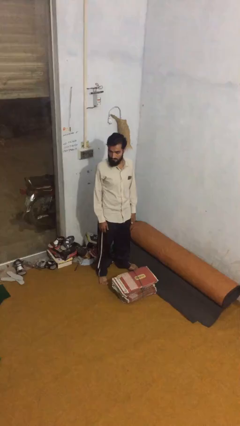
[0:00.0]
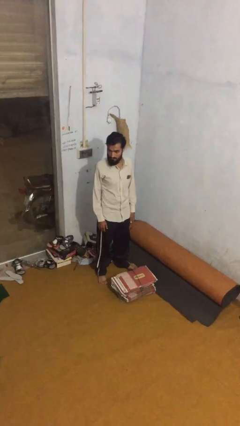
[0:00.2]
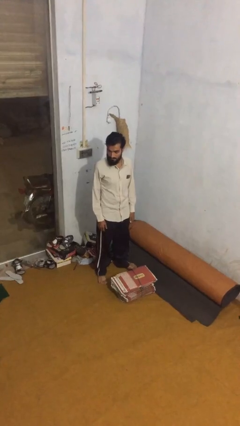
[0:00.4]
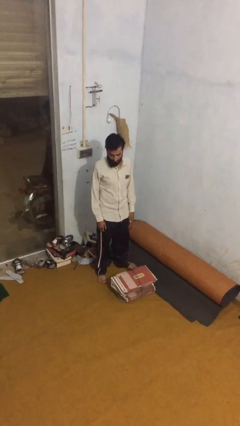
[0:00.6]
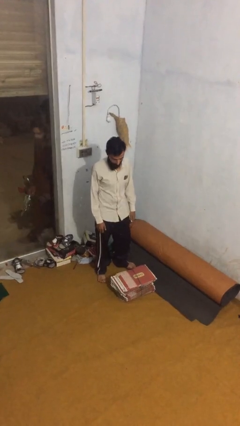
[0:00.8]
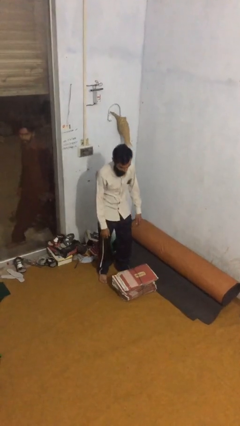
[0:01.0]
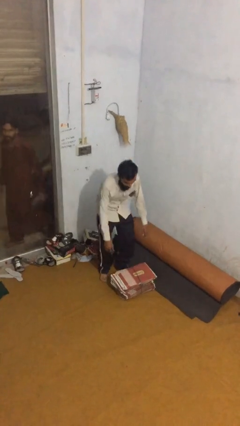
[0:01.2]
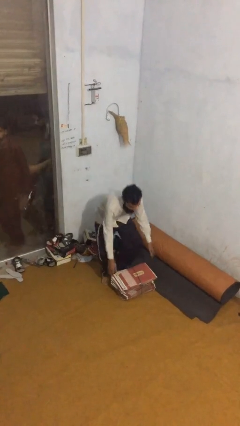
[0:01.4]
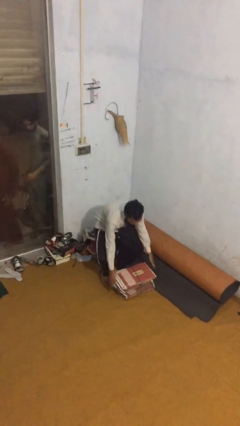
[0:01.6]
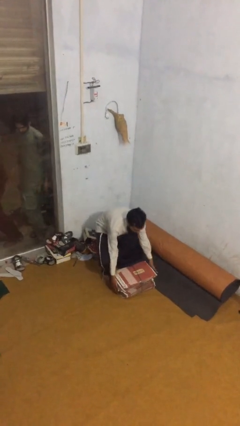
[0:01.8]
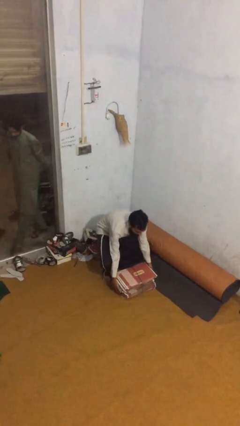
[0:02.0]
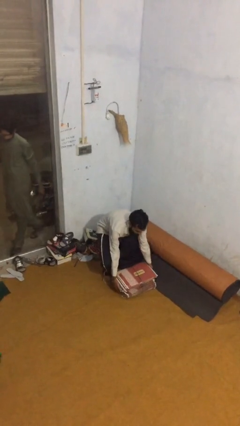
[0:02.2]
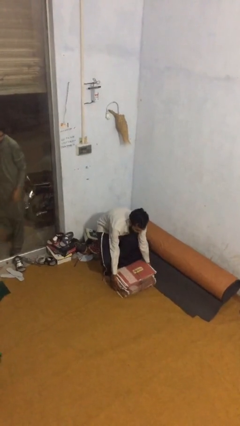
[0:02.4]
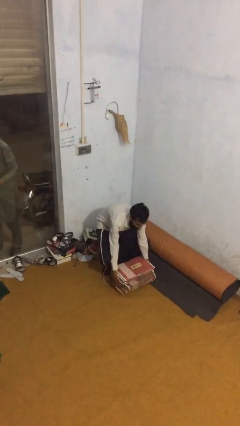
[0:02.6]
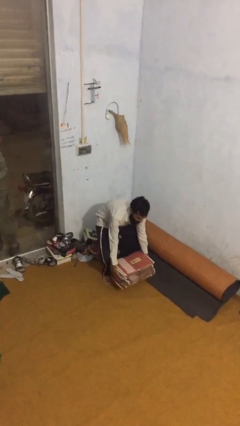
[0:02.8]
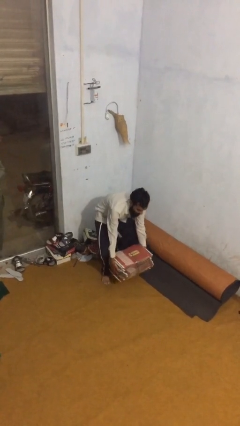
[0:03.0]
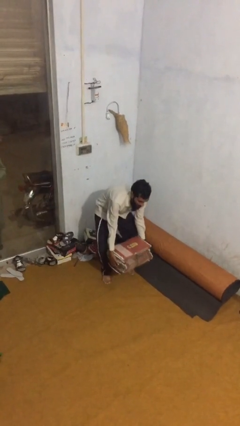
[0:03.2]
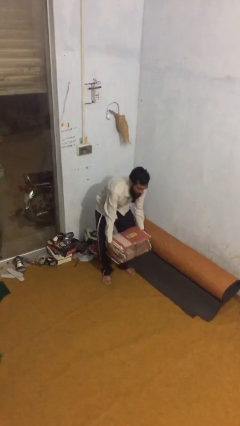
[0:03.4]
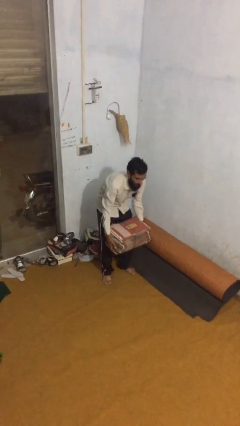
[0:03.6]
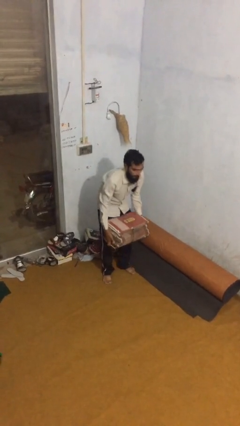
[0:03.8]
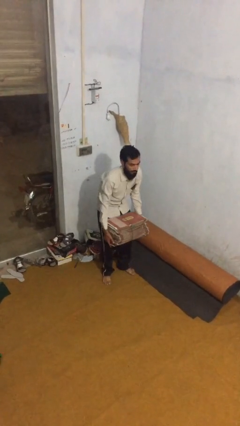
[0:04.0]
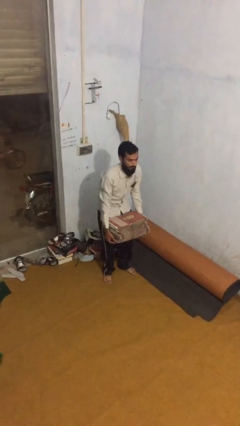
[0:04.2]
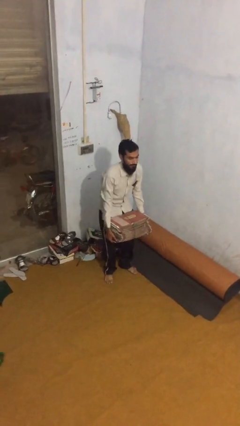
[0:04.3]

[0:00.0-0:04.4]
person picks up object from floor

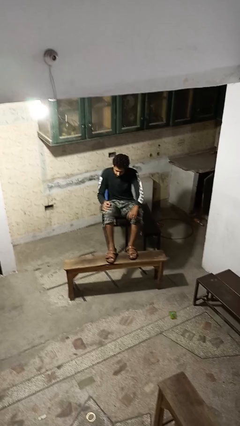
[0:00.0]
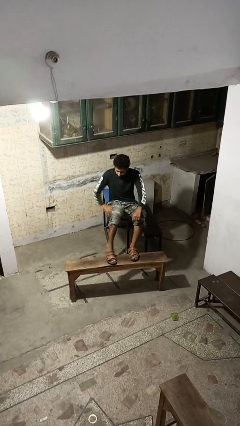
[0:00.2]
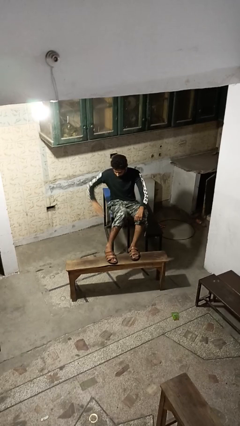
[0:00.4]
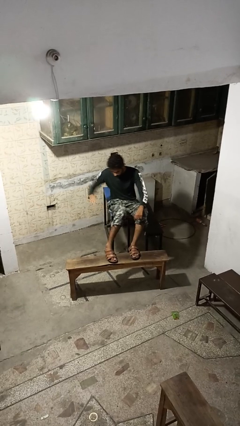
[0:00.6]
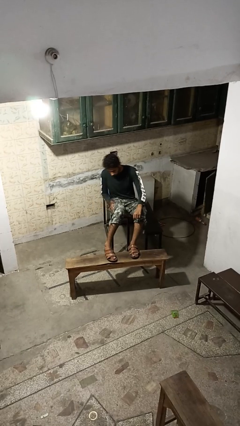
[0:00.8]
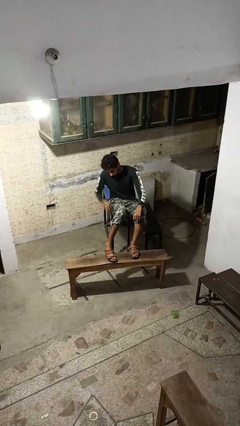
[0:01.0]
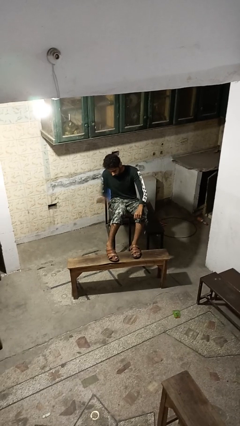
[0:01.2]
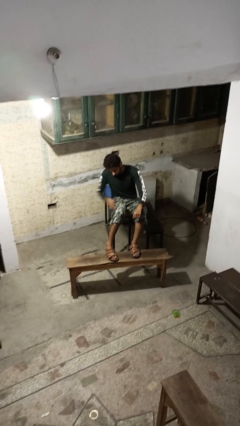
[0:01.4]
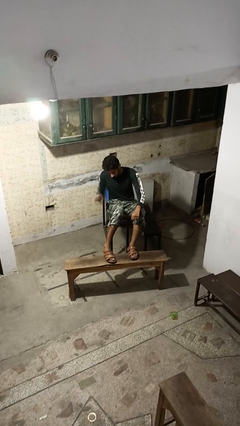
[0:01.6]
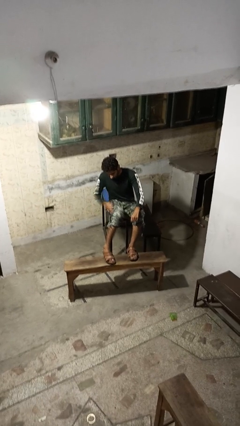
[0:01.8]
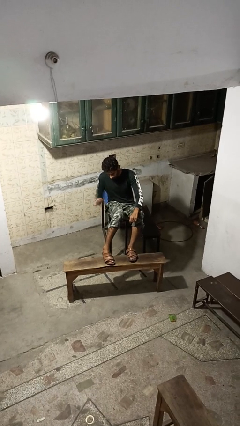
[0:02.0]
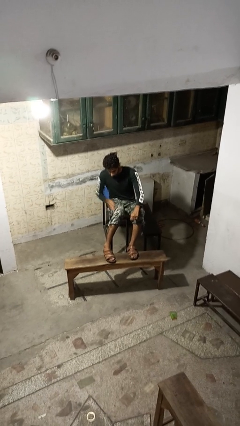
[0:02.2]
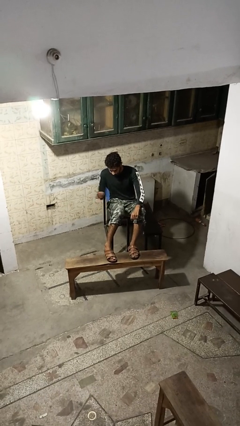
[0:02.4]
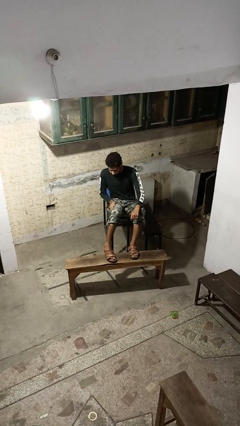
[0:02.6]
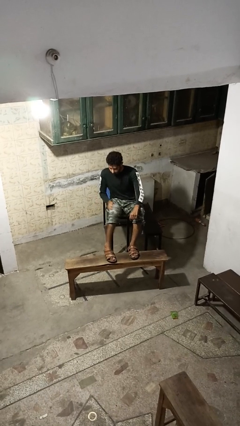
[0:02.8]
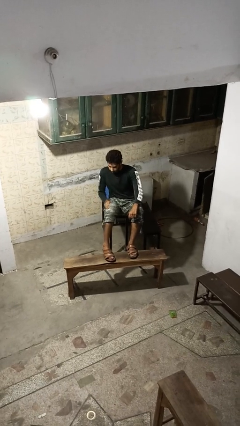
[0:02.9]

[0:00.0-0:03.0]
person slaps hands on thighs

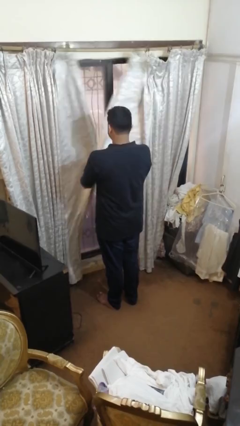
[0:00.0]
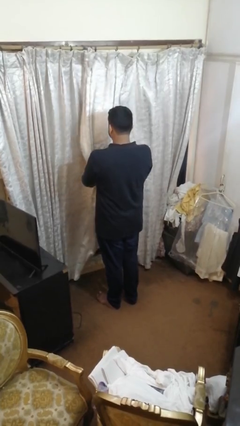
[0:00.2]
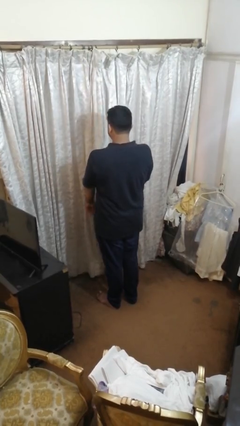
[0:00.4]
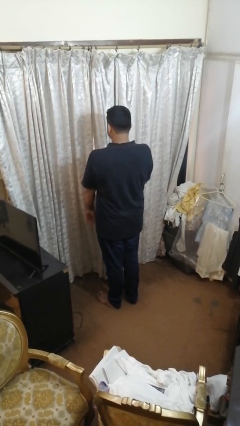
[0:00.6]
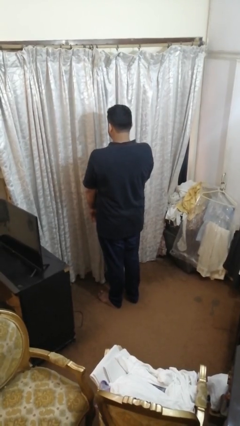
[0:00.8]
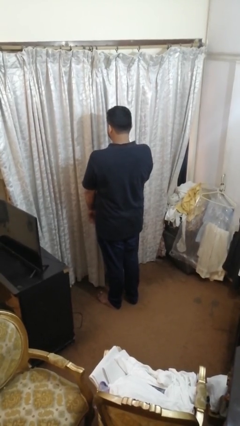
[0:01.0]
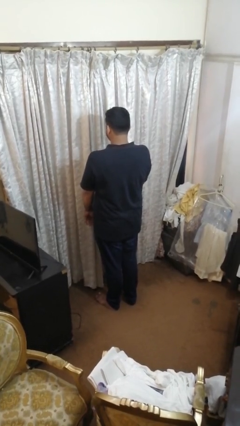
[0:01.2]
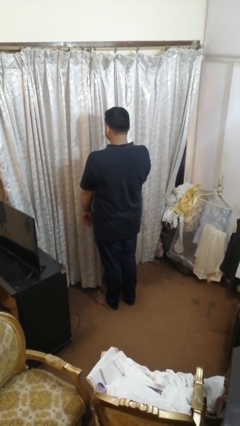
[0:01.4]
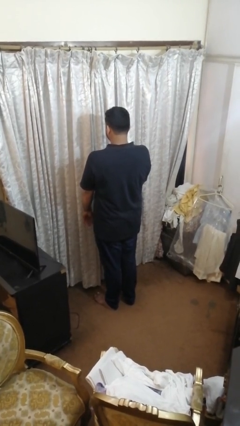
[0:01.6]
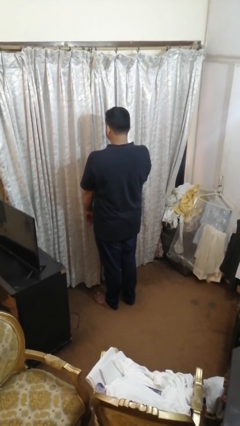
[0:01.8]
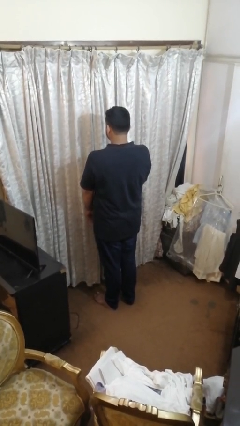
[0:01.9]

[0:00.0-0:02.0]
person closes curtains

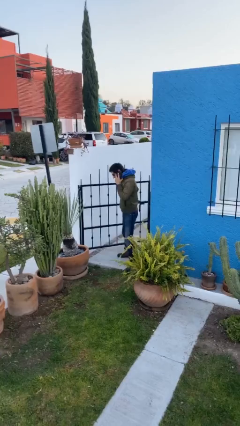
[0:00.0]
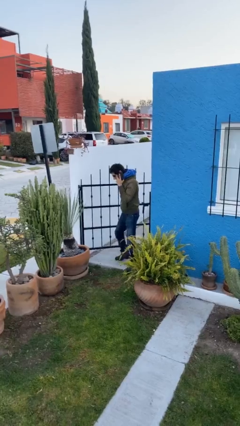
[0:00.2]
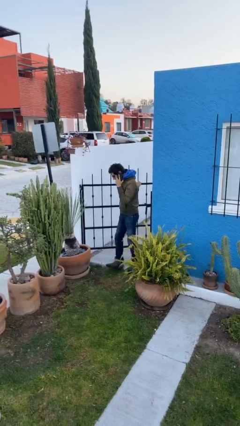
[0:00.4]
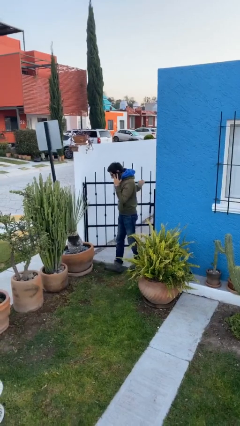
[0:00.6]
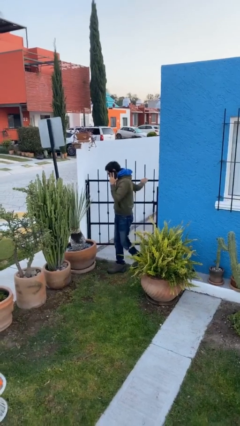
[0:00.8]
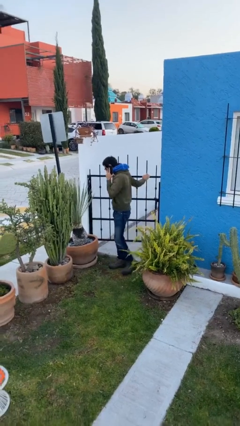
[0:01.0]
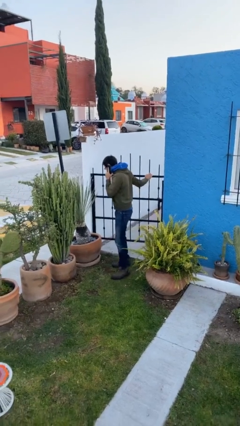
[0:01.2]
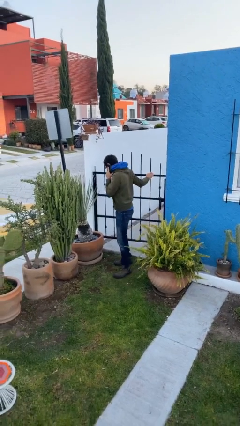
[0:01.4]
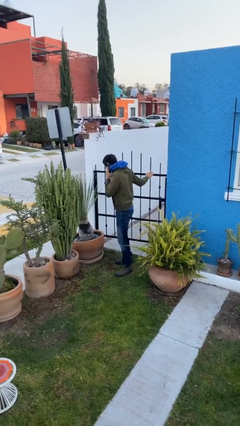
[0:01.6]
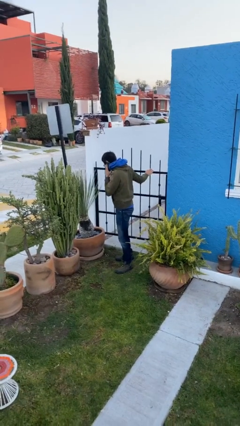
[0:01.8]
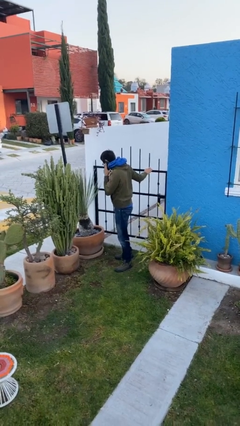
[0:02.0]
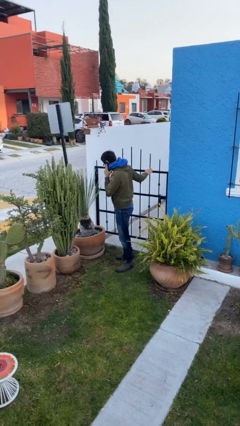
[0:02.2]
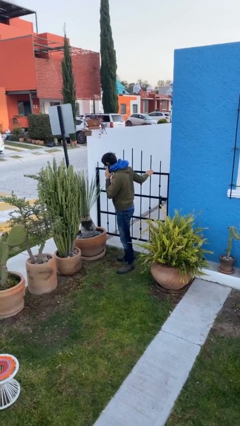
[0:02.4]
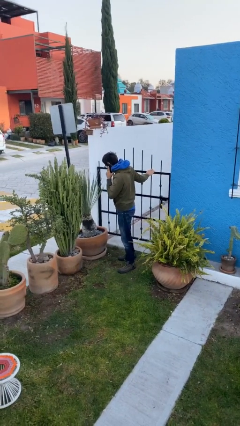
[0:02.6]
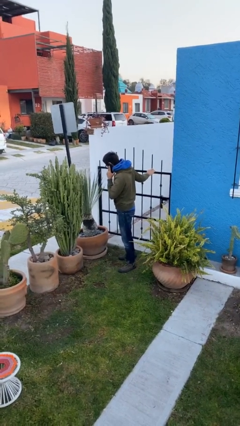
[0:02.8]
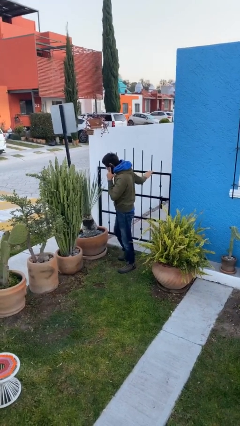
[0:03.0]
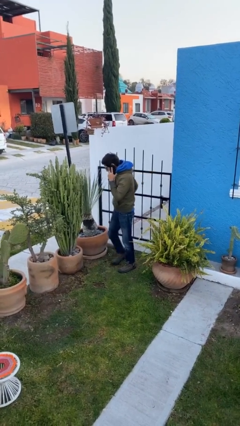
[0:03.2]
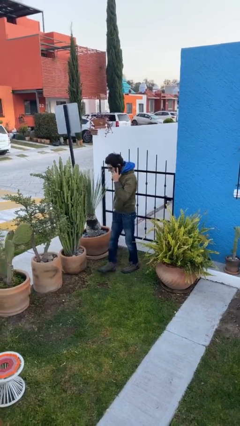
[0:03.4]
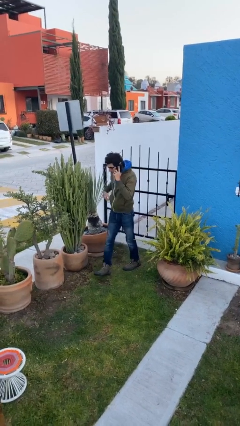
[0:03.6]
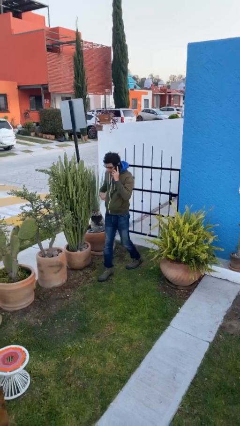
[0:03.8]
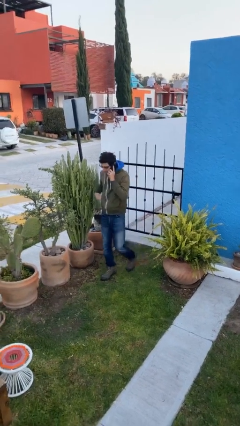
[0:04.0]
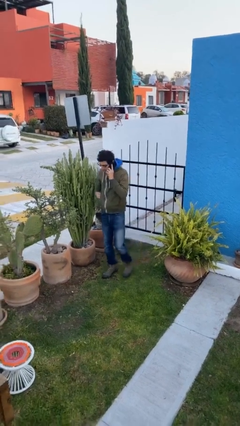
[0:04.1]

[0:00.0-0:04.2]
person closes facility door

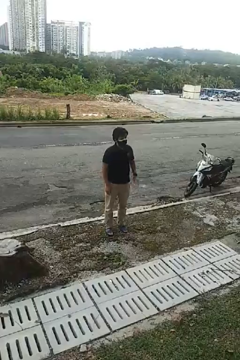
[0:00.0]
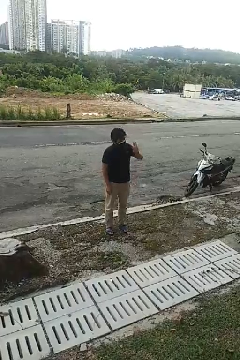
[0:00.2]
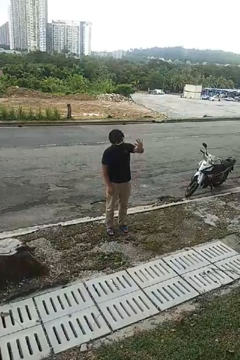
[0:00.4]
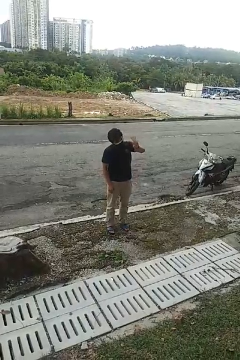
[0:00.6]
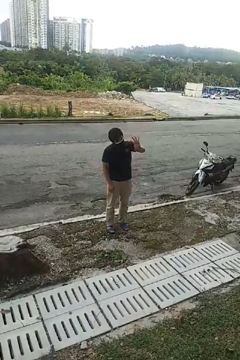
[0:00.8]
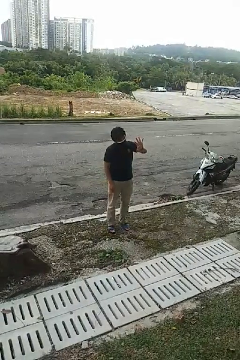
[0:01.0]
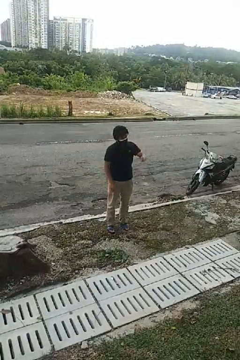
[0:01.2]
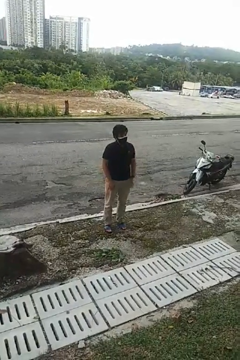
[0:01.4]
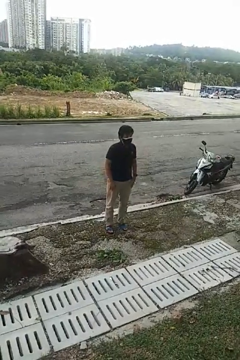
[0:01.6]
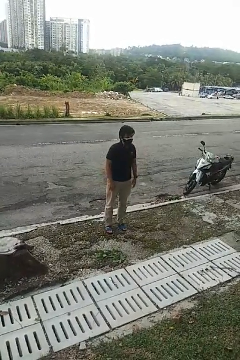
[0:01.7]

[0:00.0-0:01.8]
person gestures number four

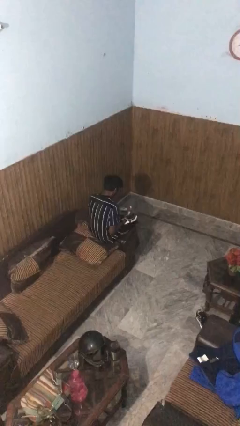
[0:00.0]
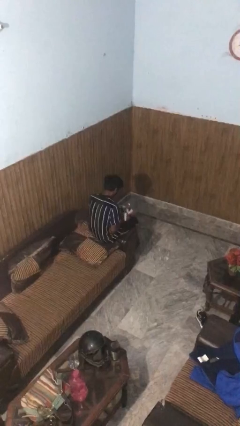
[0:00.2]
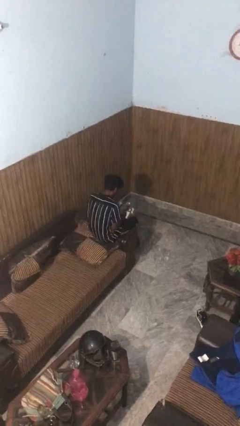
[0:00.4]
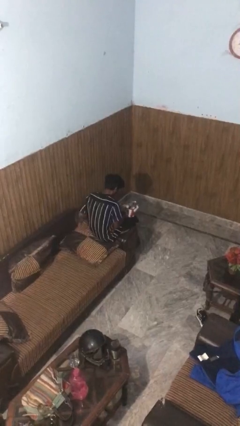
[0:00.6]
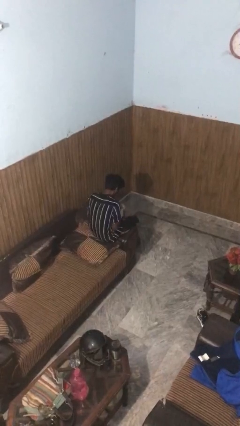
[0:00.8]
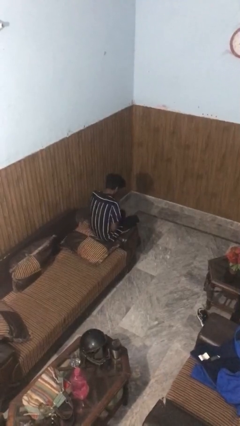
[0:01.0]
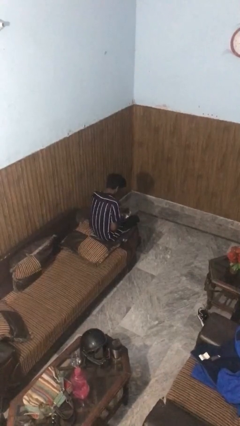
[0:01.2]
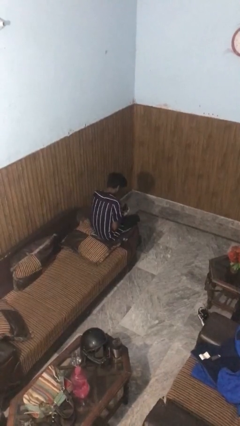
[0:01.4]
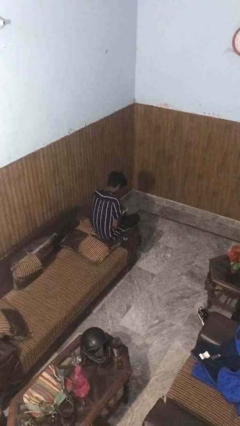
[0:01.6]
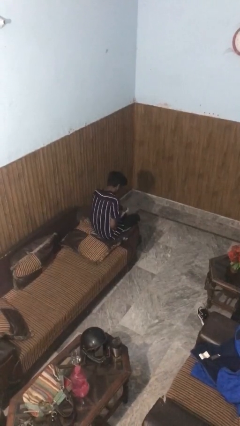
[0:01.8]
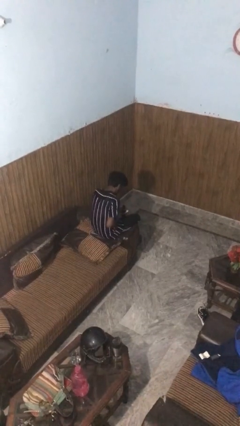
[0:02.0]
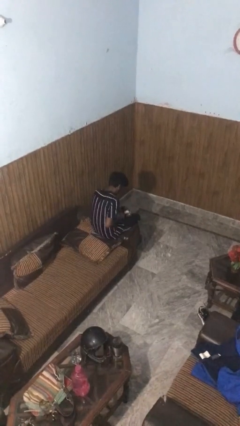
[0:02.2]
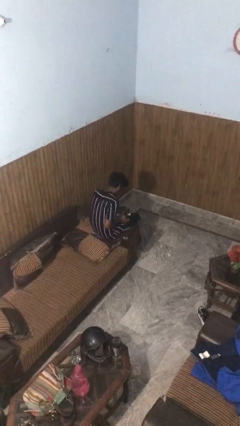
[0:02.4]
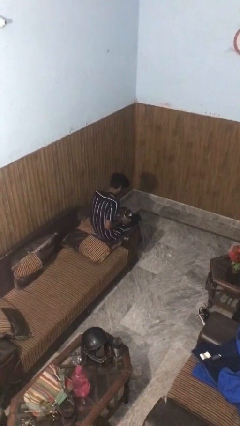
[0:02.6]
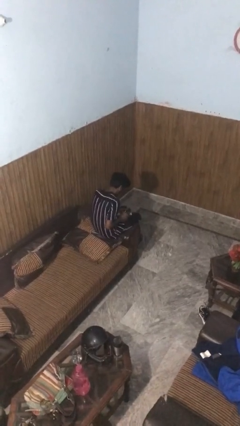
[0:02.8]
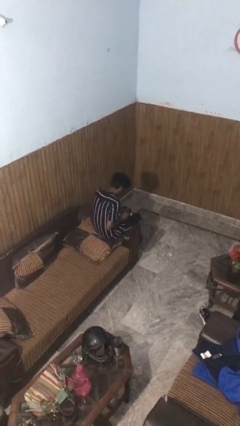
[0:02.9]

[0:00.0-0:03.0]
person takes off gloves
